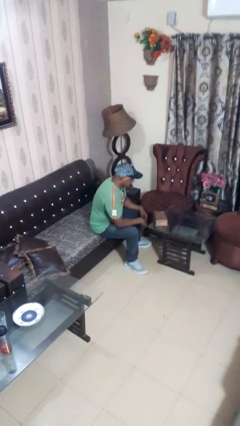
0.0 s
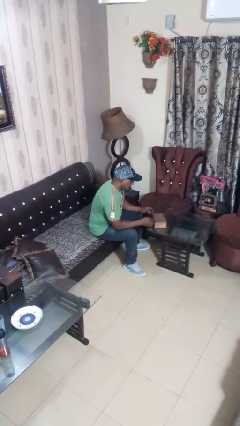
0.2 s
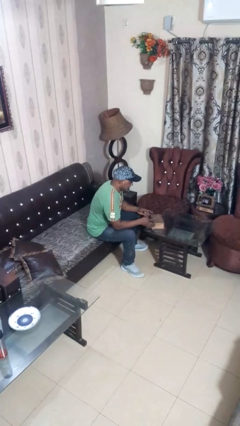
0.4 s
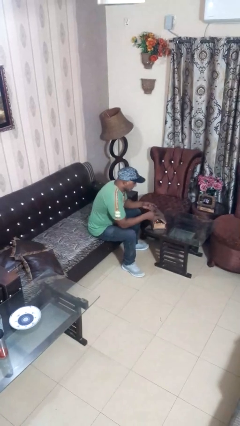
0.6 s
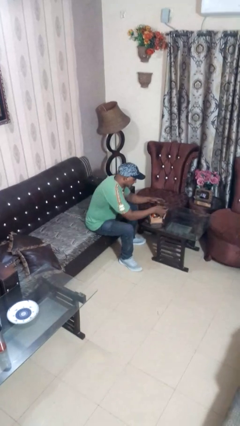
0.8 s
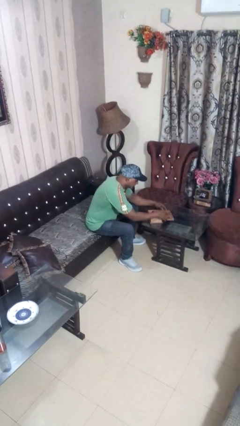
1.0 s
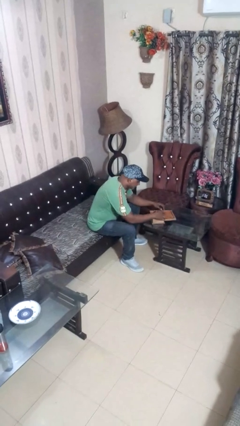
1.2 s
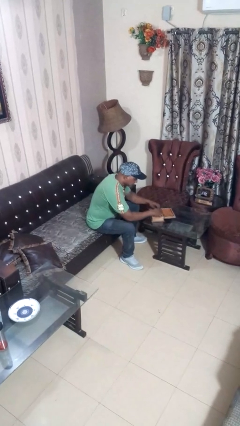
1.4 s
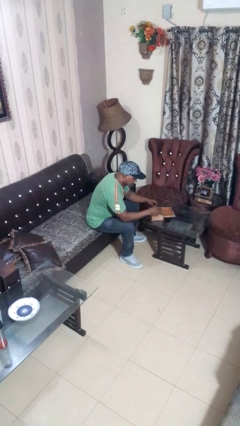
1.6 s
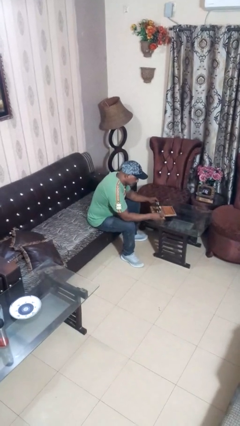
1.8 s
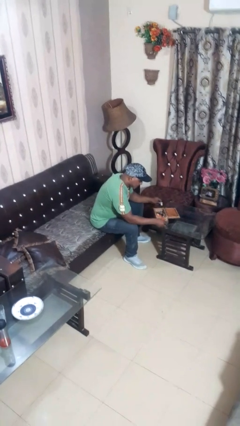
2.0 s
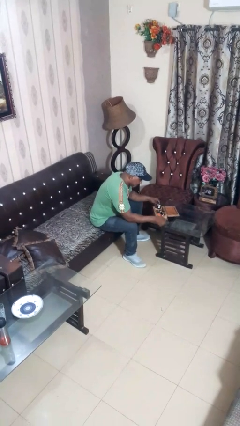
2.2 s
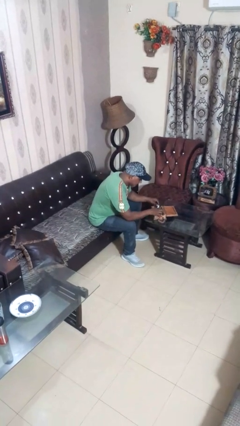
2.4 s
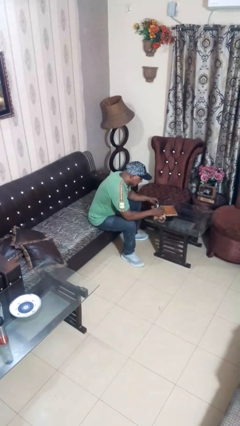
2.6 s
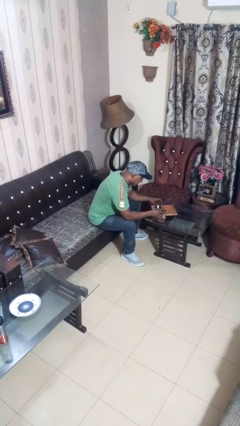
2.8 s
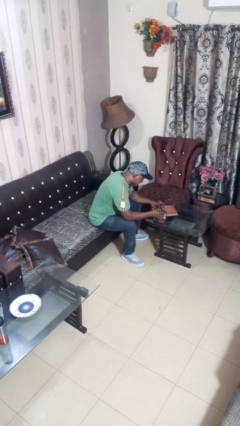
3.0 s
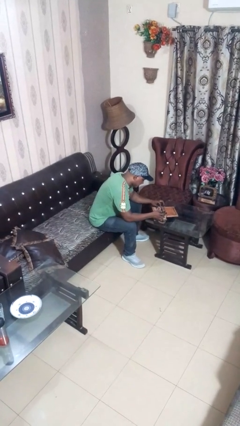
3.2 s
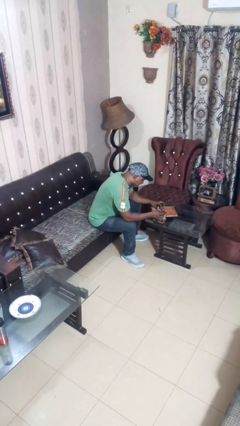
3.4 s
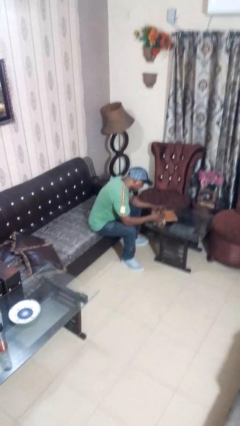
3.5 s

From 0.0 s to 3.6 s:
person opens jewelry box

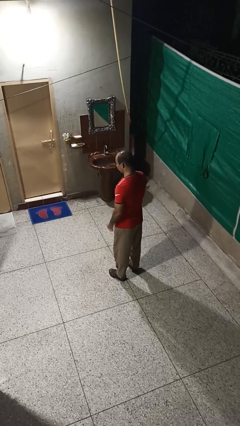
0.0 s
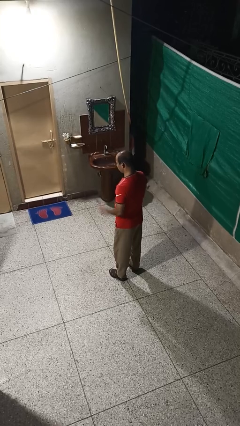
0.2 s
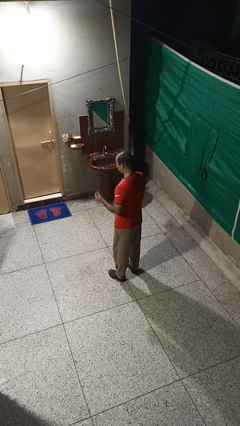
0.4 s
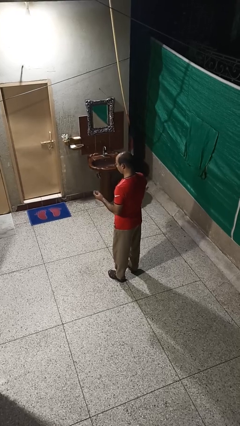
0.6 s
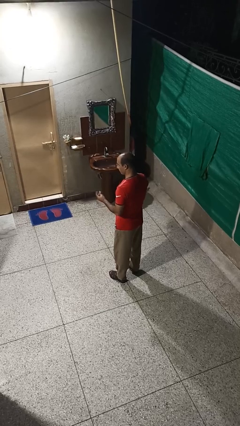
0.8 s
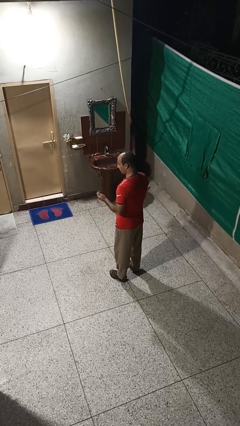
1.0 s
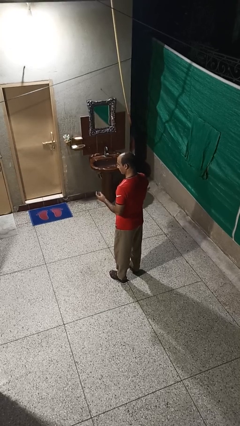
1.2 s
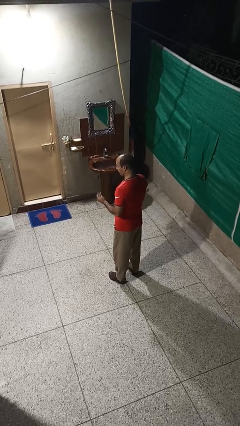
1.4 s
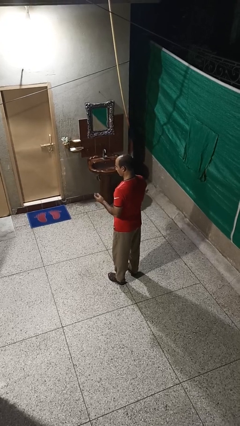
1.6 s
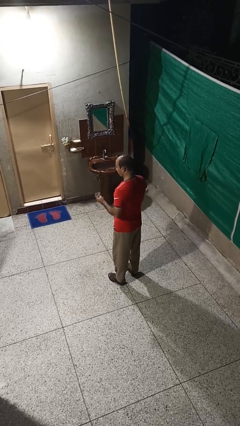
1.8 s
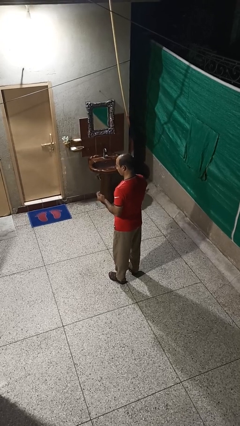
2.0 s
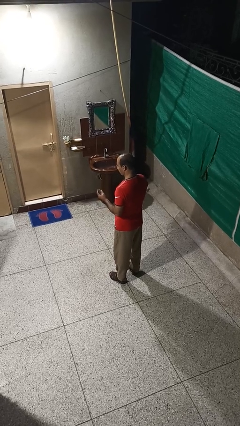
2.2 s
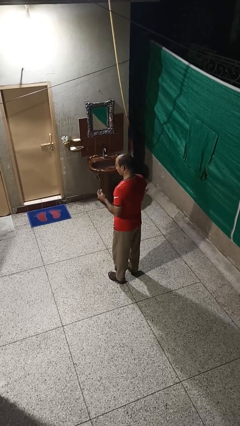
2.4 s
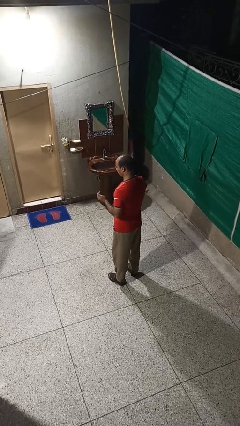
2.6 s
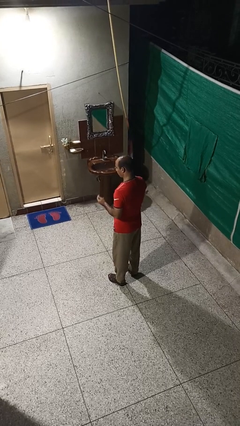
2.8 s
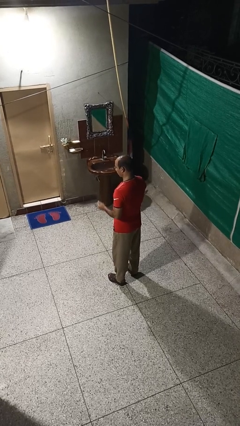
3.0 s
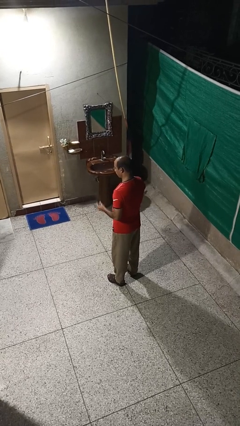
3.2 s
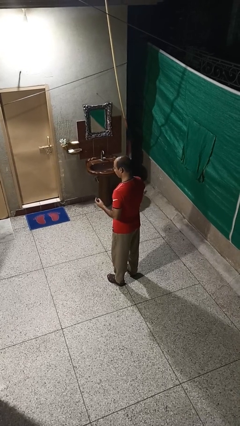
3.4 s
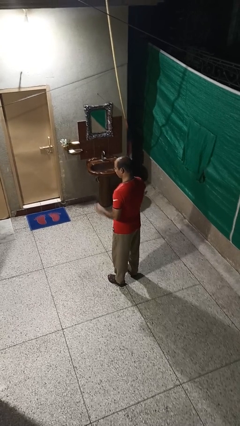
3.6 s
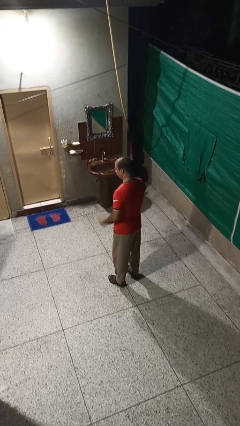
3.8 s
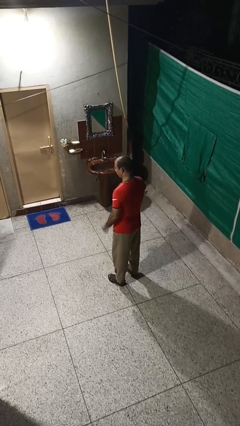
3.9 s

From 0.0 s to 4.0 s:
person snaps fingers

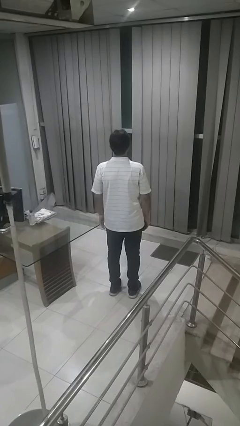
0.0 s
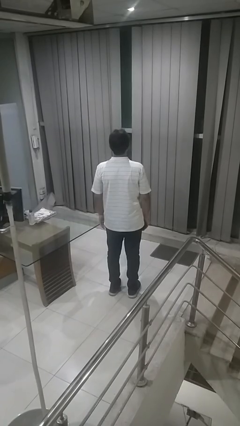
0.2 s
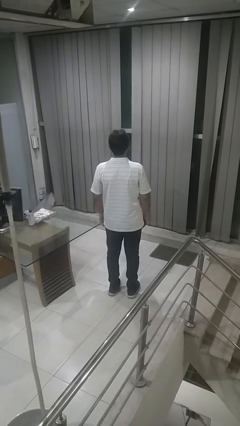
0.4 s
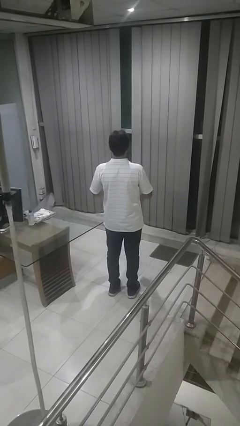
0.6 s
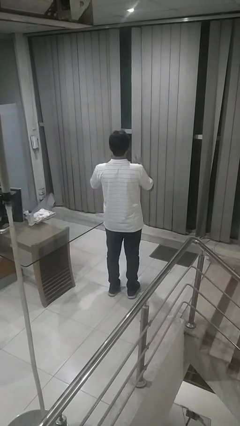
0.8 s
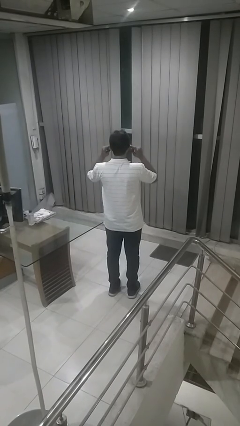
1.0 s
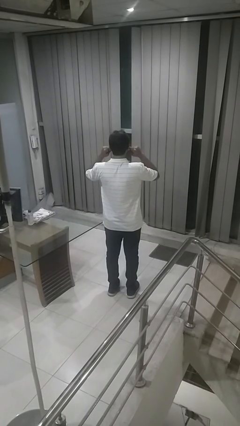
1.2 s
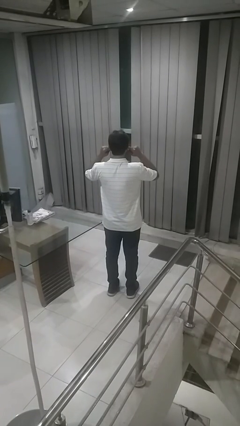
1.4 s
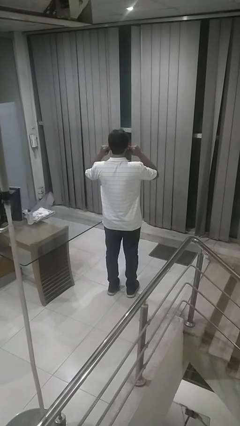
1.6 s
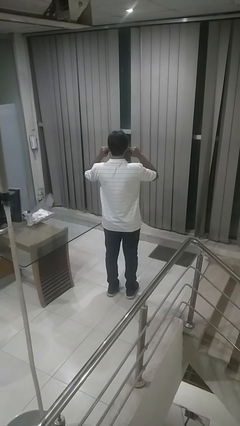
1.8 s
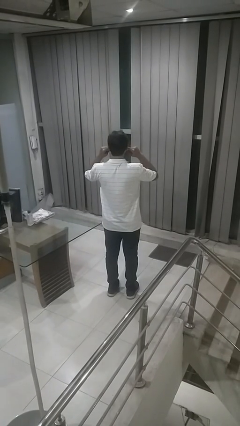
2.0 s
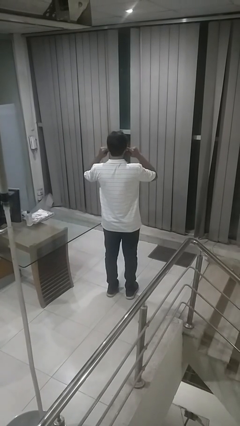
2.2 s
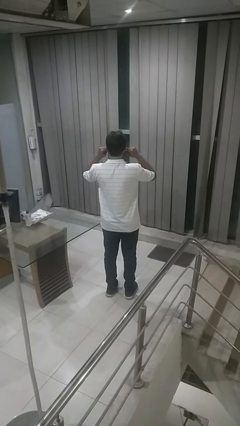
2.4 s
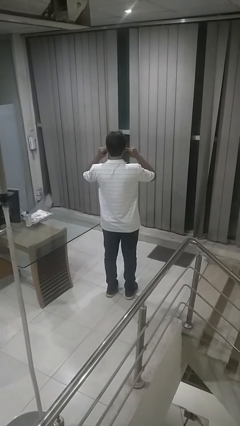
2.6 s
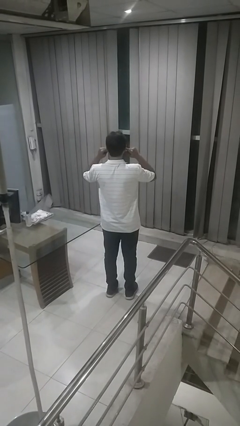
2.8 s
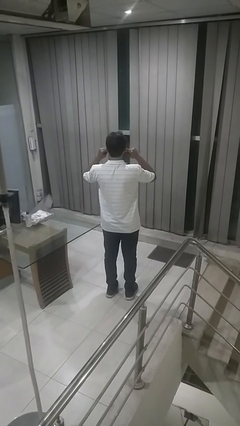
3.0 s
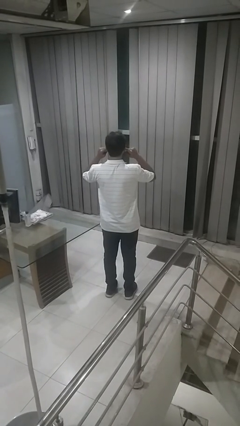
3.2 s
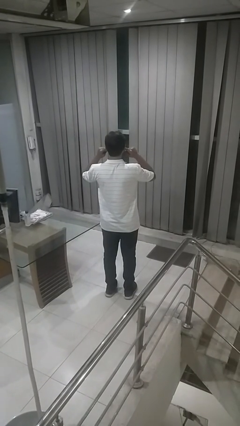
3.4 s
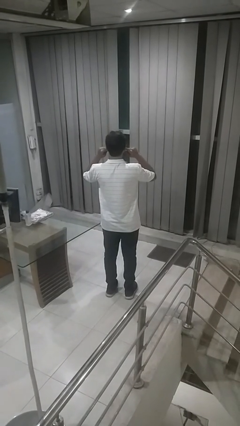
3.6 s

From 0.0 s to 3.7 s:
person puts fingers in ear

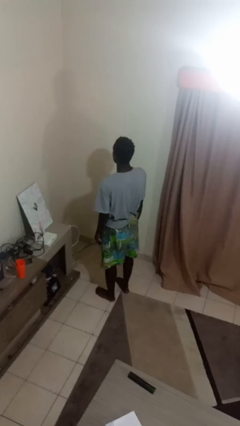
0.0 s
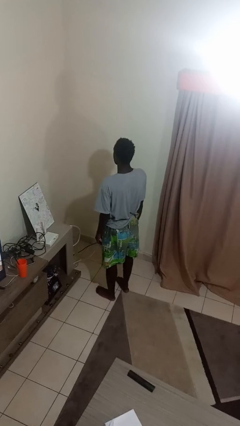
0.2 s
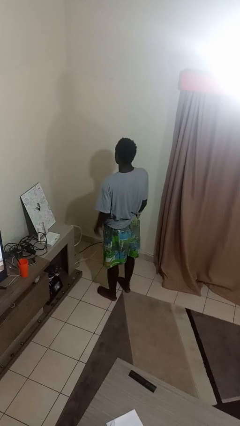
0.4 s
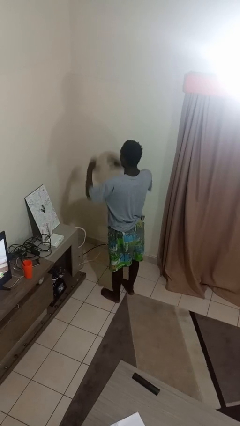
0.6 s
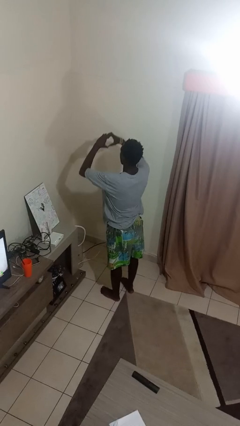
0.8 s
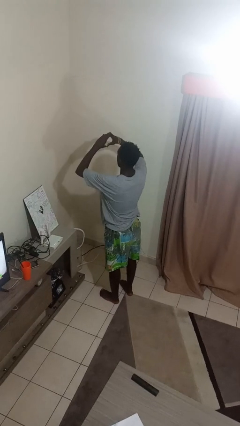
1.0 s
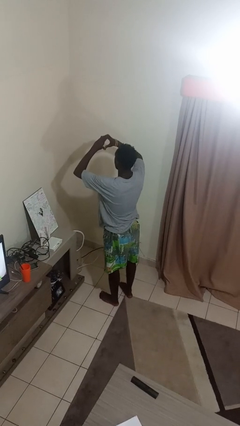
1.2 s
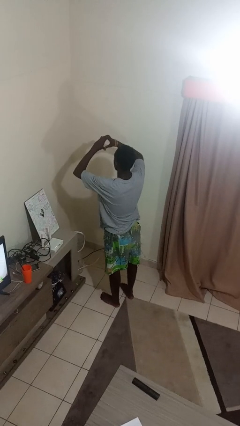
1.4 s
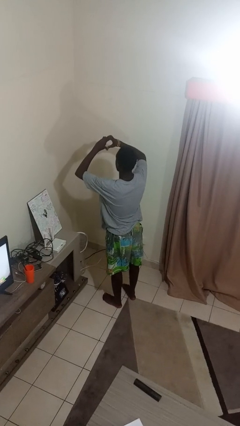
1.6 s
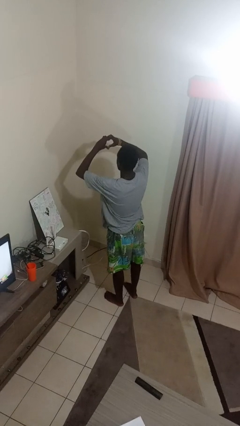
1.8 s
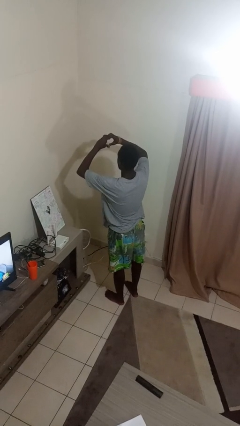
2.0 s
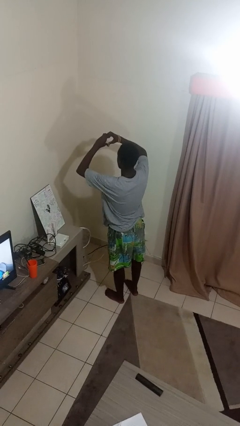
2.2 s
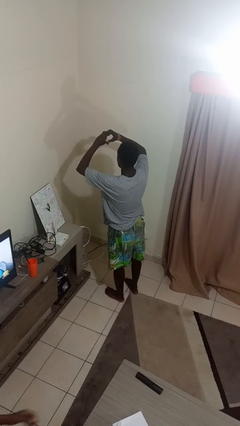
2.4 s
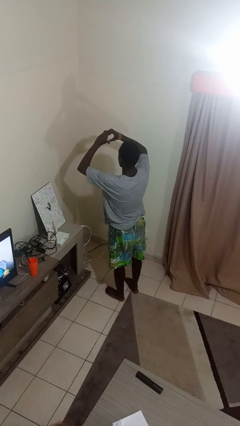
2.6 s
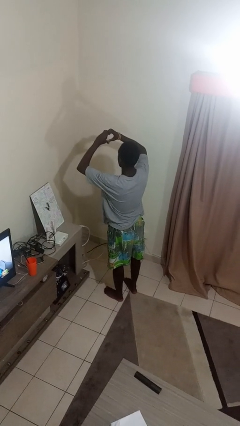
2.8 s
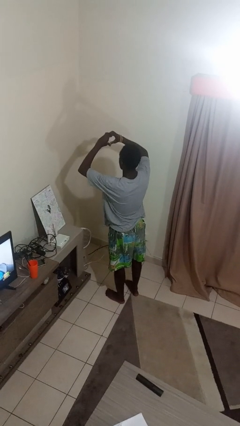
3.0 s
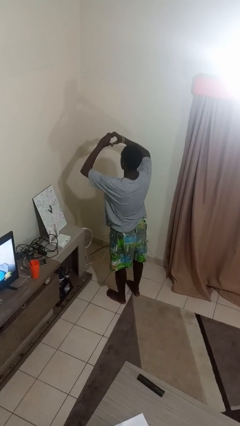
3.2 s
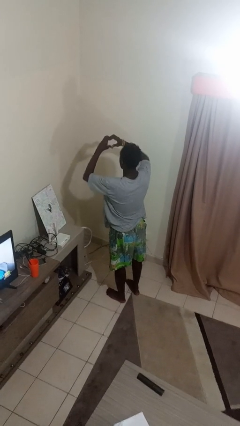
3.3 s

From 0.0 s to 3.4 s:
person gestures heart

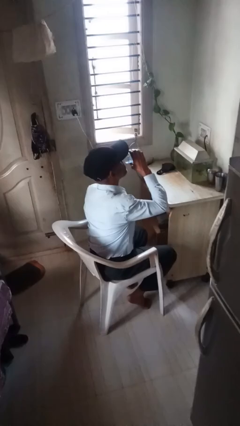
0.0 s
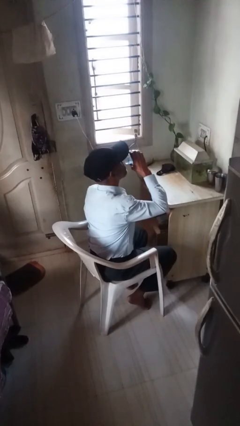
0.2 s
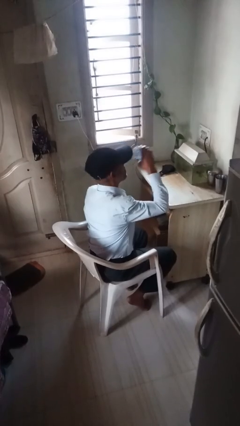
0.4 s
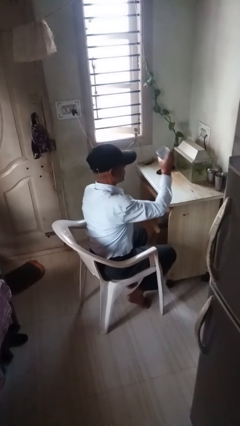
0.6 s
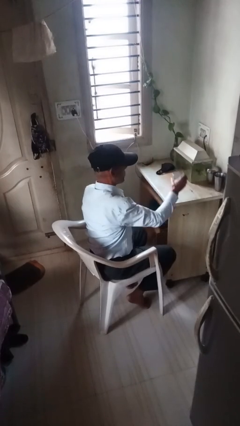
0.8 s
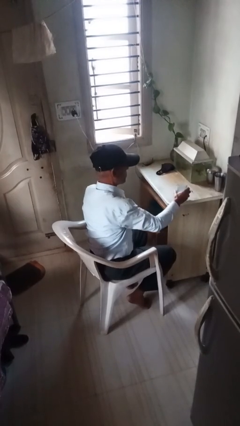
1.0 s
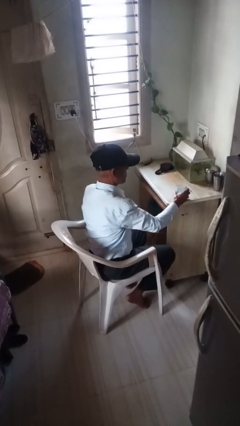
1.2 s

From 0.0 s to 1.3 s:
person puts down object on table

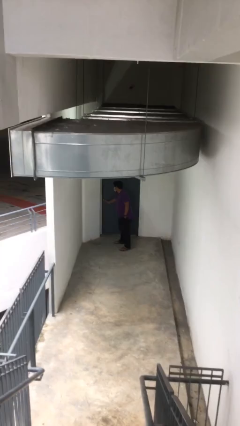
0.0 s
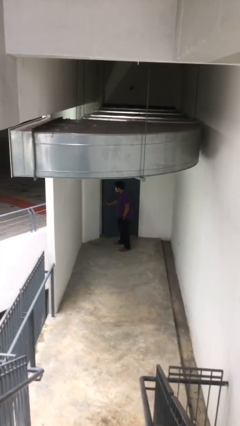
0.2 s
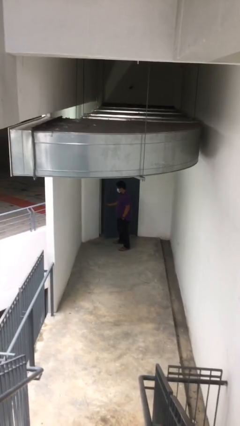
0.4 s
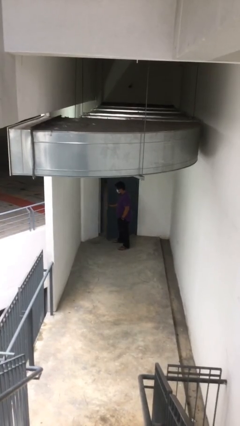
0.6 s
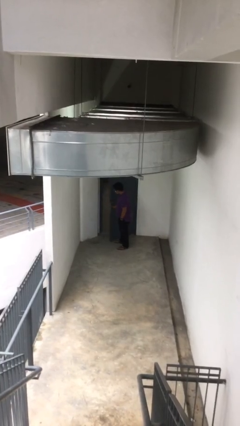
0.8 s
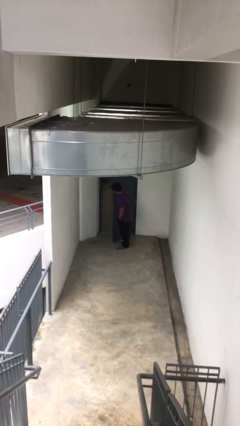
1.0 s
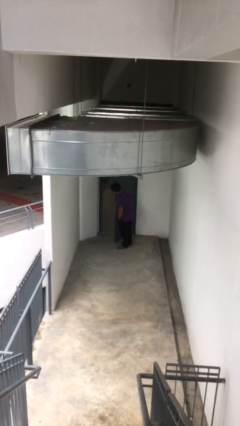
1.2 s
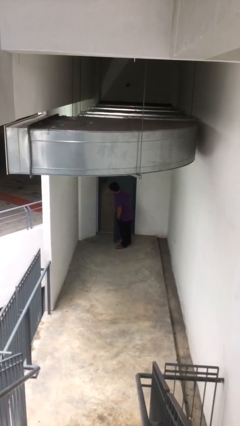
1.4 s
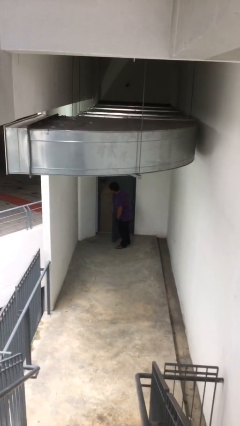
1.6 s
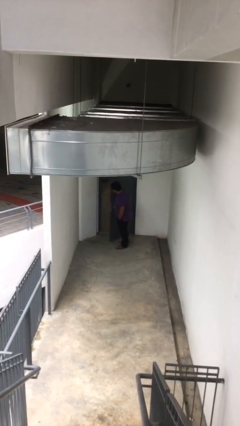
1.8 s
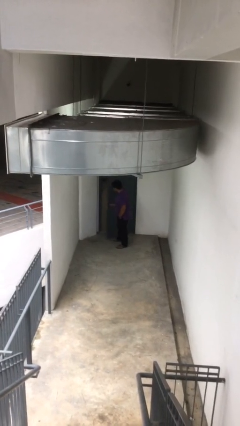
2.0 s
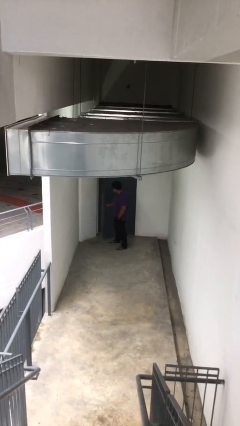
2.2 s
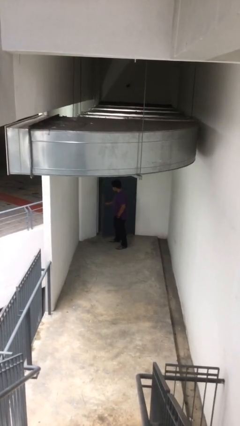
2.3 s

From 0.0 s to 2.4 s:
person opens facility door
